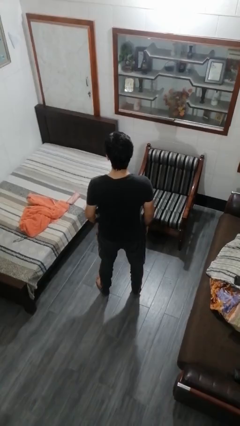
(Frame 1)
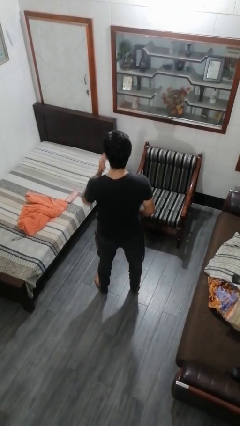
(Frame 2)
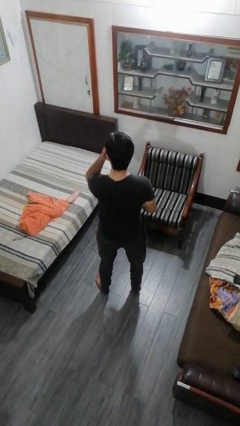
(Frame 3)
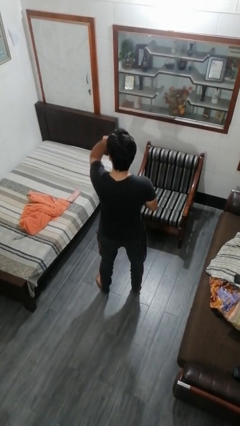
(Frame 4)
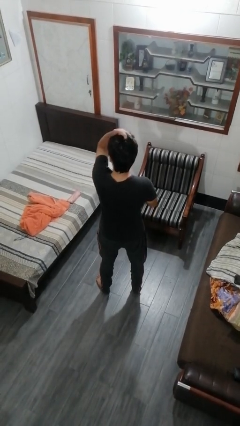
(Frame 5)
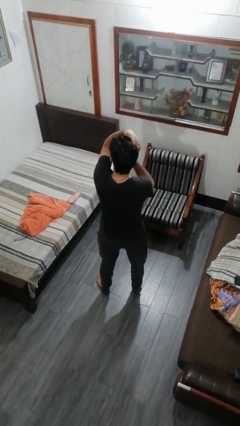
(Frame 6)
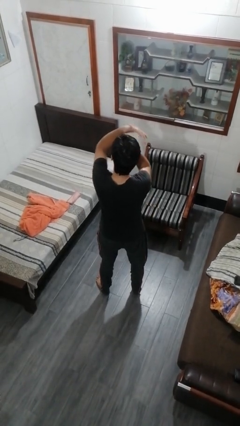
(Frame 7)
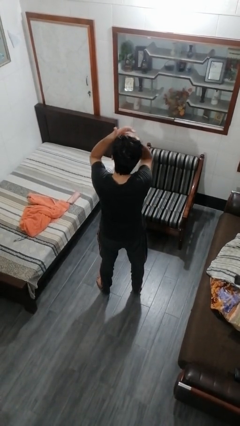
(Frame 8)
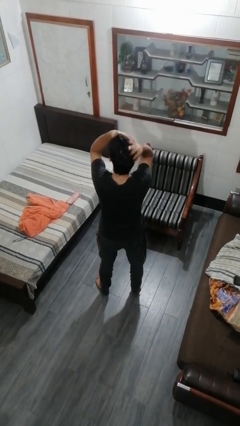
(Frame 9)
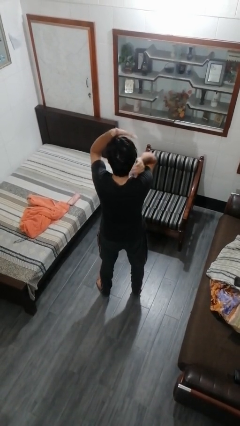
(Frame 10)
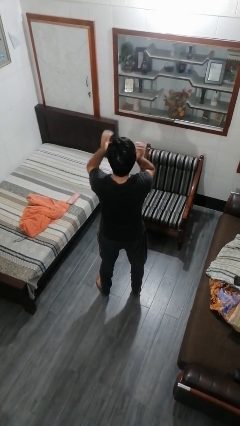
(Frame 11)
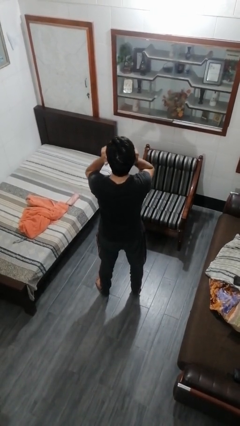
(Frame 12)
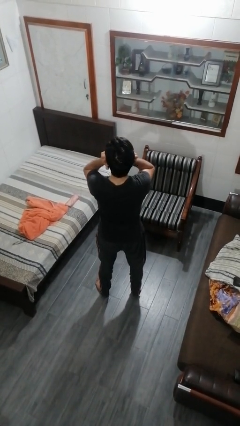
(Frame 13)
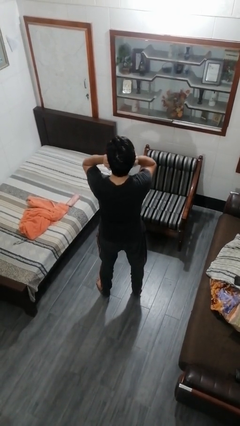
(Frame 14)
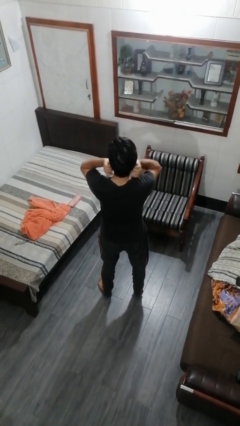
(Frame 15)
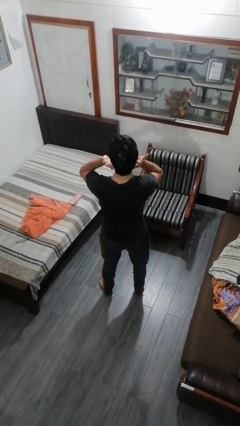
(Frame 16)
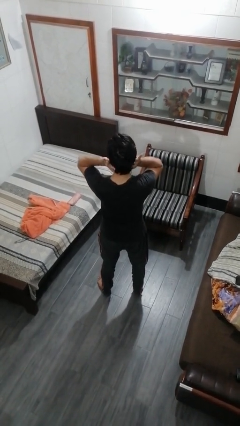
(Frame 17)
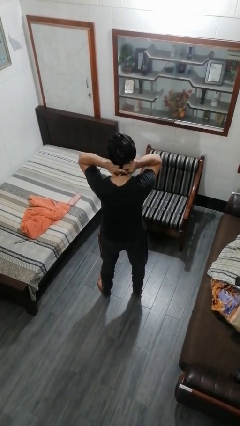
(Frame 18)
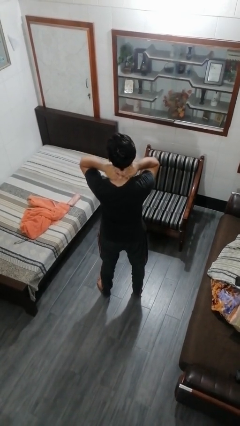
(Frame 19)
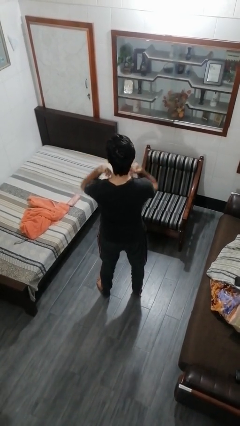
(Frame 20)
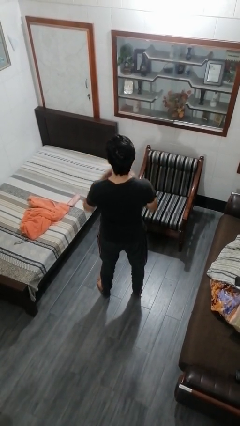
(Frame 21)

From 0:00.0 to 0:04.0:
person strokes hair

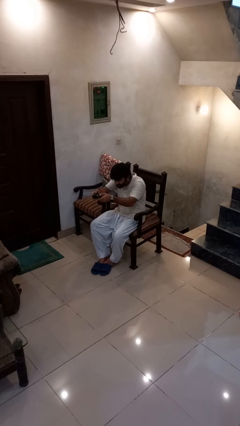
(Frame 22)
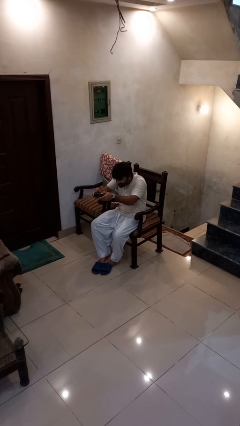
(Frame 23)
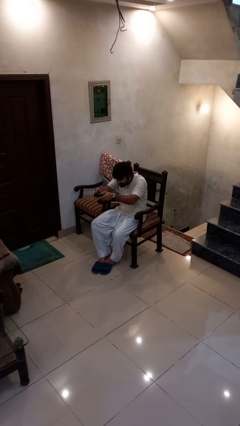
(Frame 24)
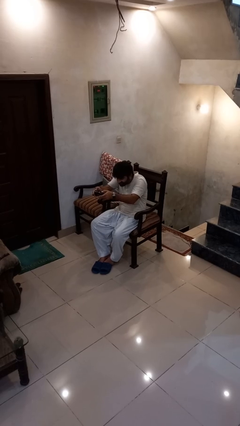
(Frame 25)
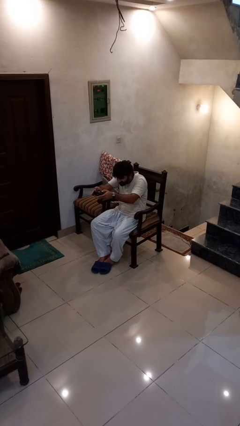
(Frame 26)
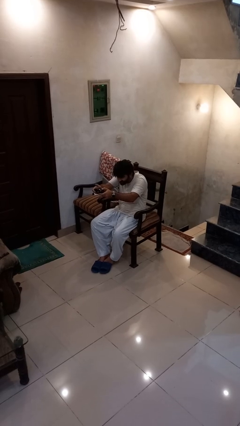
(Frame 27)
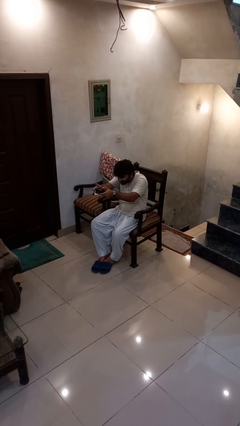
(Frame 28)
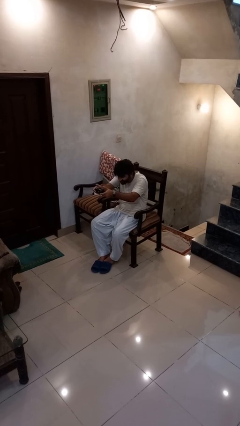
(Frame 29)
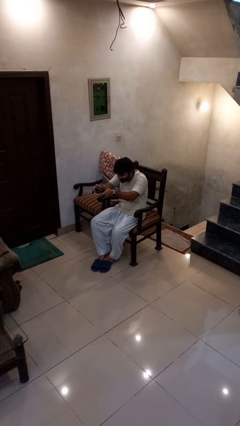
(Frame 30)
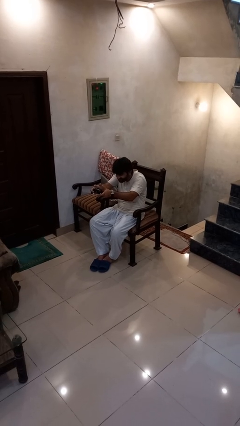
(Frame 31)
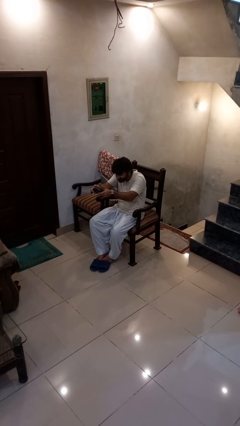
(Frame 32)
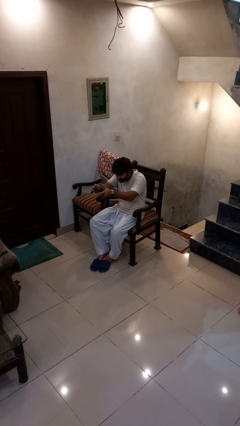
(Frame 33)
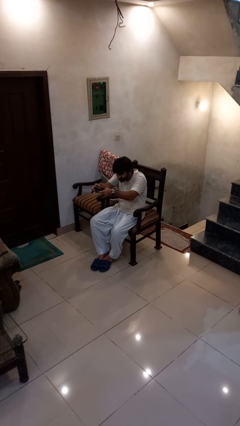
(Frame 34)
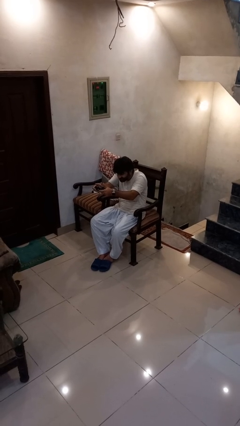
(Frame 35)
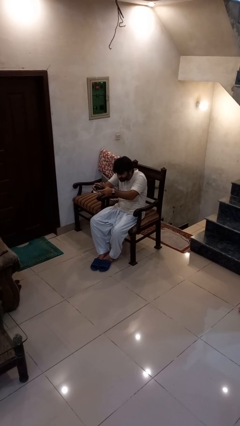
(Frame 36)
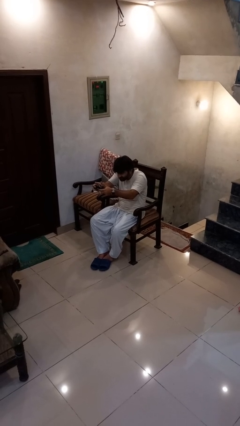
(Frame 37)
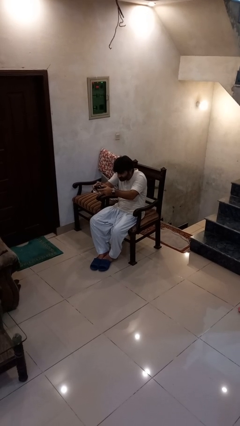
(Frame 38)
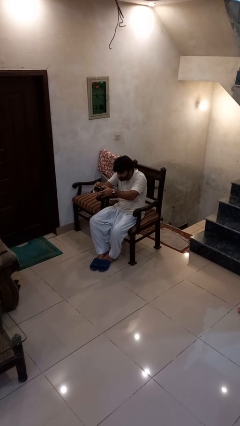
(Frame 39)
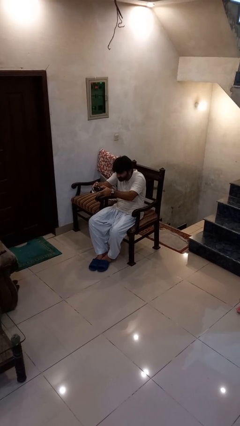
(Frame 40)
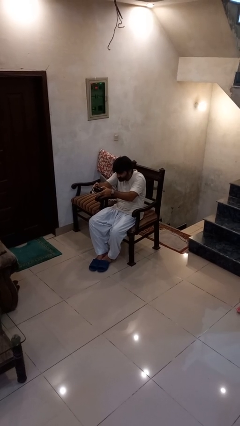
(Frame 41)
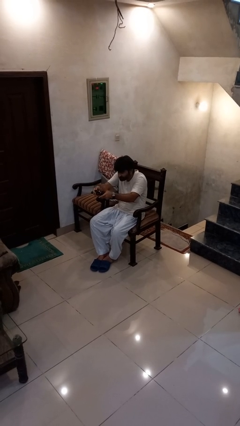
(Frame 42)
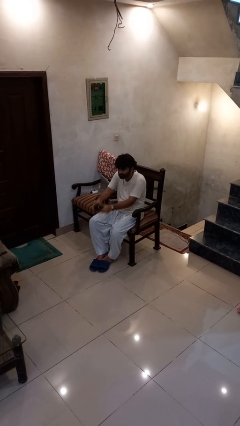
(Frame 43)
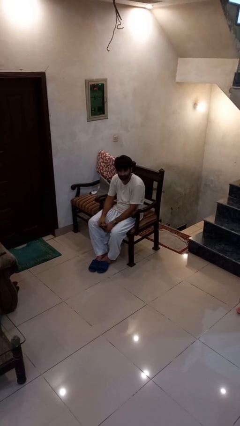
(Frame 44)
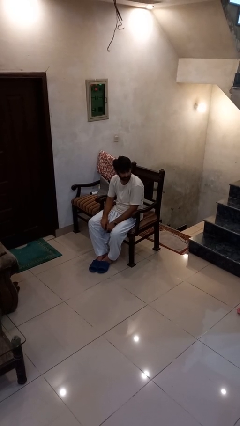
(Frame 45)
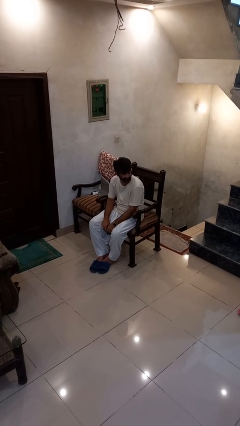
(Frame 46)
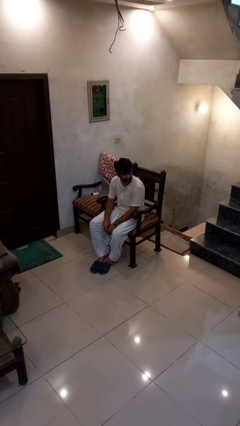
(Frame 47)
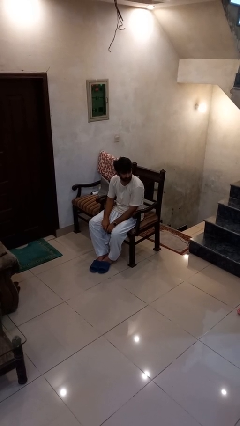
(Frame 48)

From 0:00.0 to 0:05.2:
person interacts with handheld game

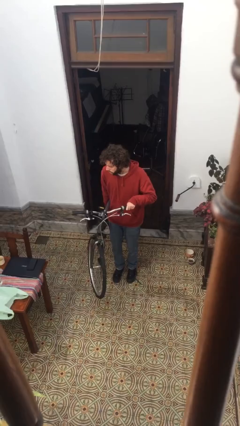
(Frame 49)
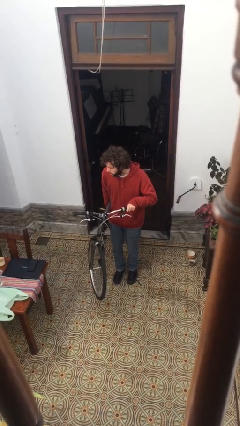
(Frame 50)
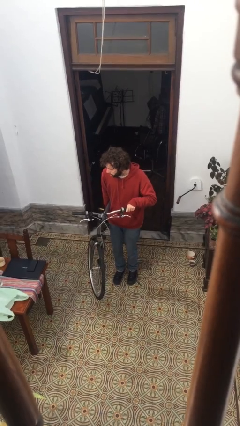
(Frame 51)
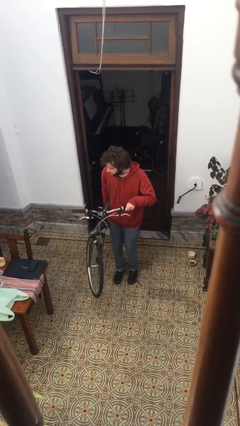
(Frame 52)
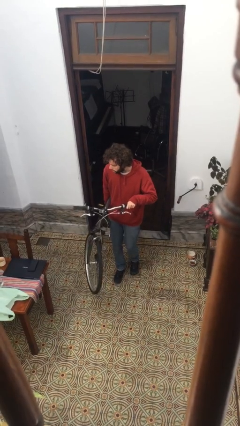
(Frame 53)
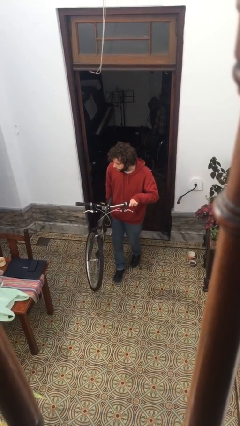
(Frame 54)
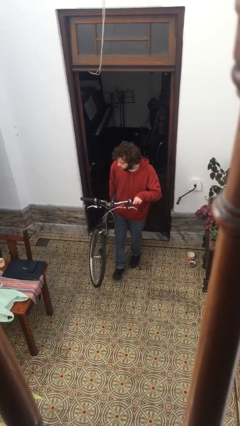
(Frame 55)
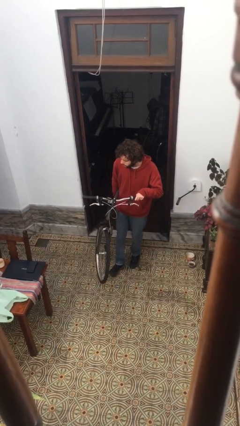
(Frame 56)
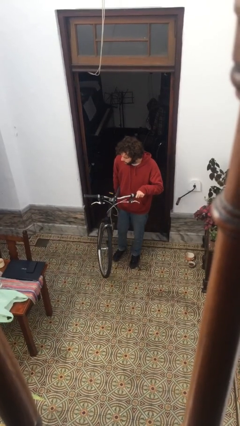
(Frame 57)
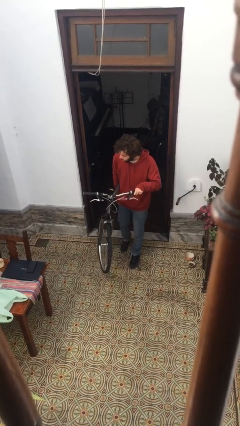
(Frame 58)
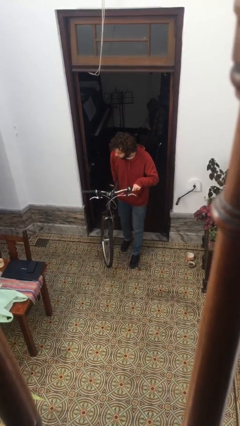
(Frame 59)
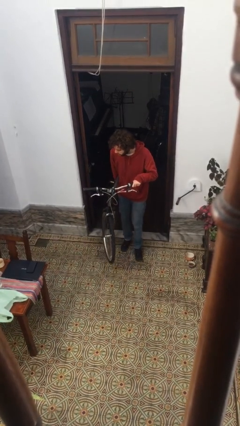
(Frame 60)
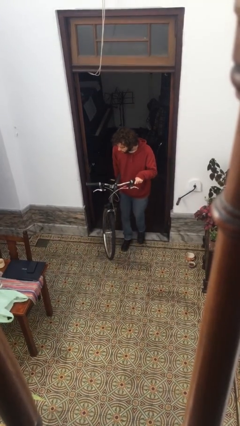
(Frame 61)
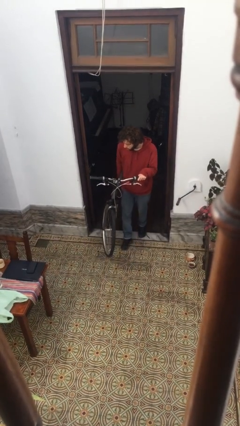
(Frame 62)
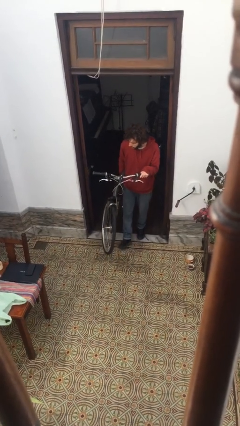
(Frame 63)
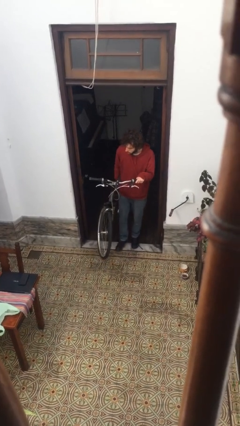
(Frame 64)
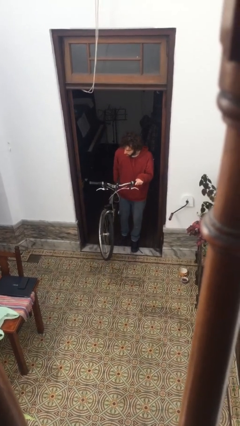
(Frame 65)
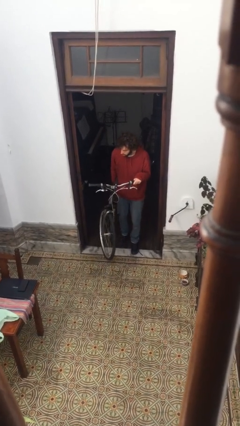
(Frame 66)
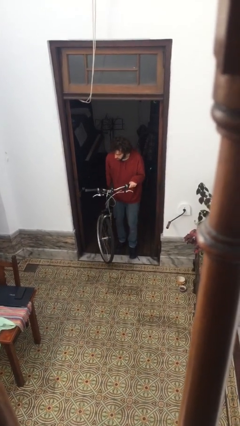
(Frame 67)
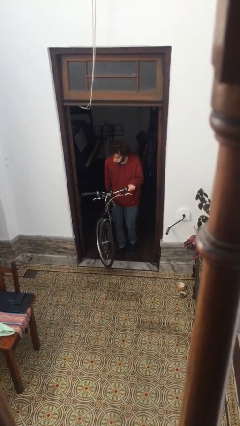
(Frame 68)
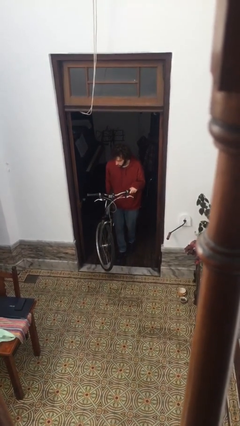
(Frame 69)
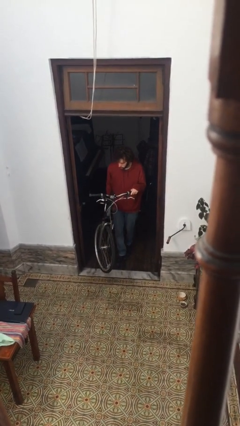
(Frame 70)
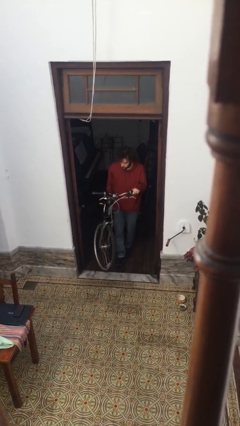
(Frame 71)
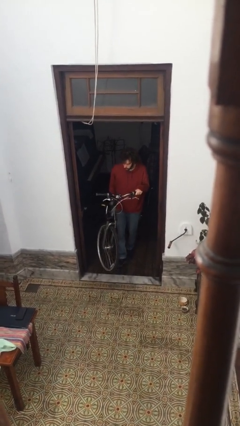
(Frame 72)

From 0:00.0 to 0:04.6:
person carries bicycle

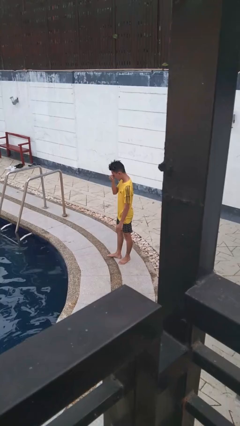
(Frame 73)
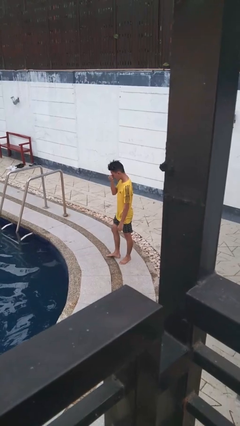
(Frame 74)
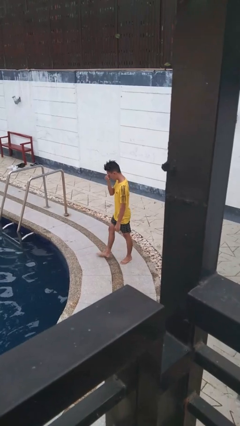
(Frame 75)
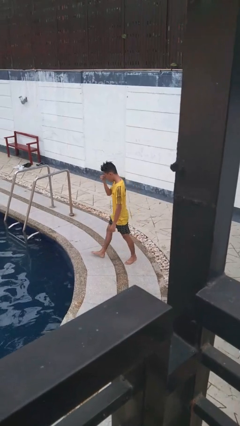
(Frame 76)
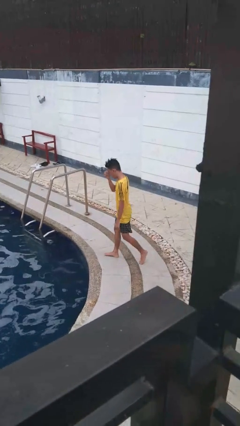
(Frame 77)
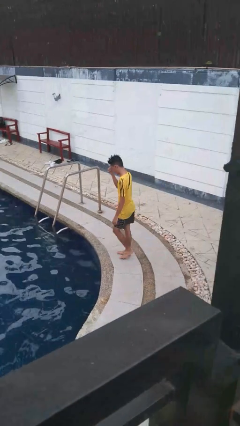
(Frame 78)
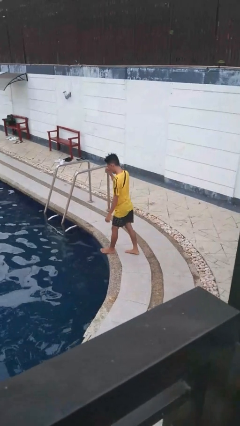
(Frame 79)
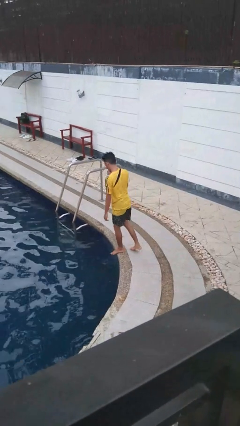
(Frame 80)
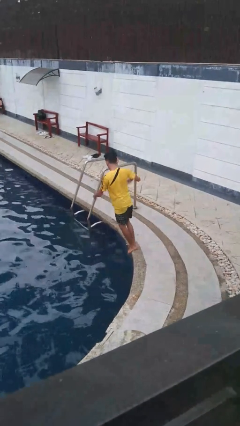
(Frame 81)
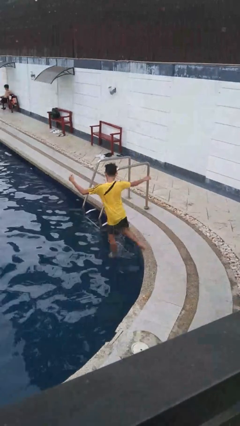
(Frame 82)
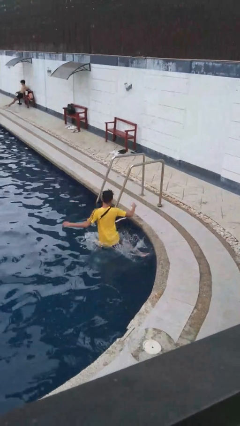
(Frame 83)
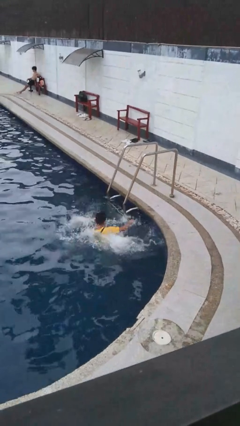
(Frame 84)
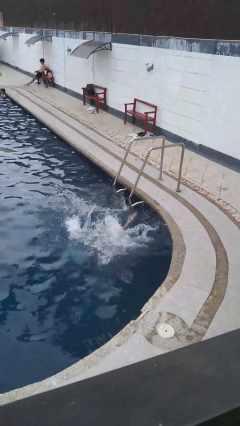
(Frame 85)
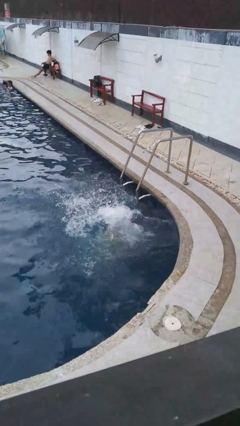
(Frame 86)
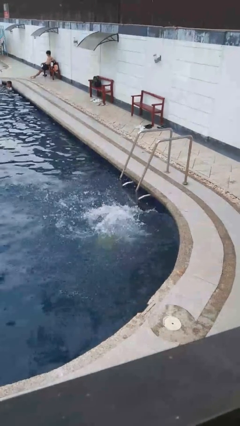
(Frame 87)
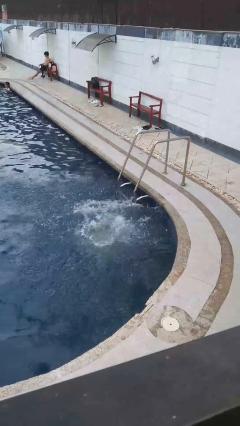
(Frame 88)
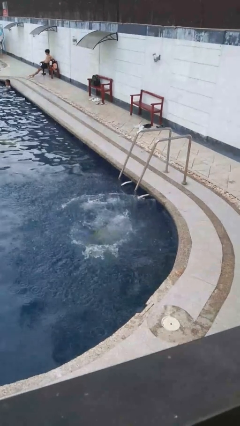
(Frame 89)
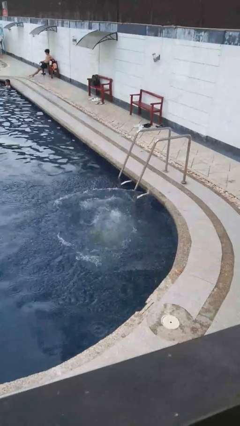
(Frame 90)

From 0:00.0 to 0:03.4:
person falls into pool

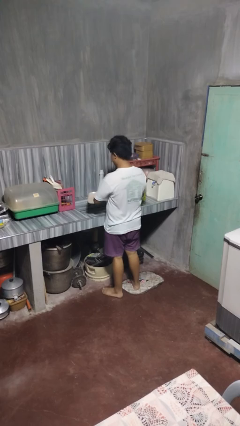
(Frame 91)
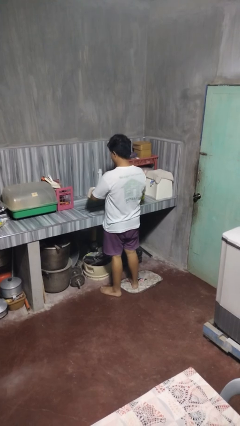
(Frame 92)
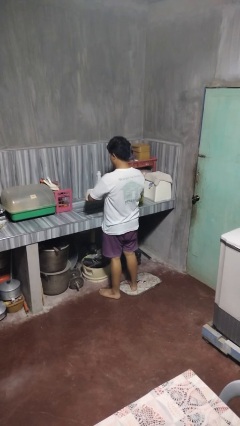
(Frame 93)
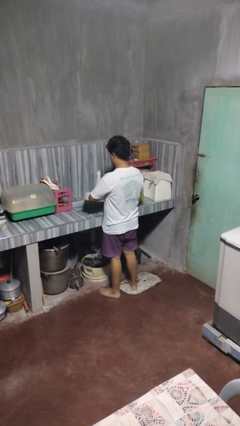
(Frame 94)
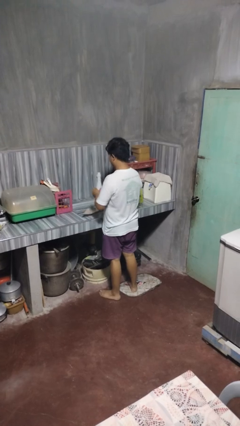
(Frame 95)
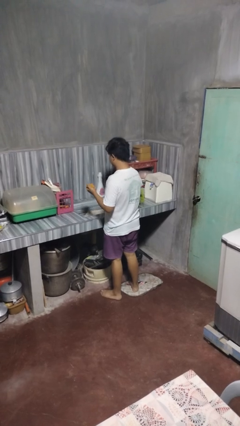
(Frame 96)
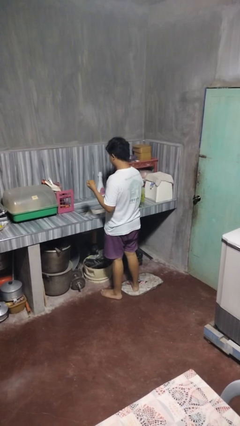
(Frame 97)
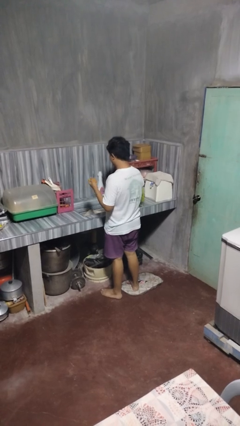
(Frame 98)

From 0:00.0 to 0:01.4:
person washes dish
